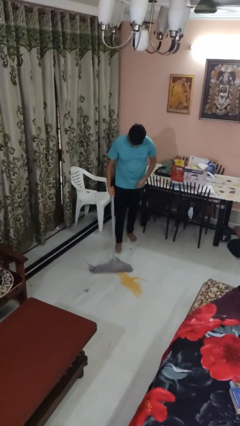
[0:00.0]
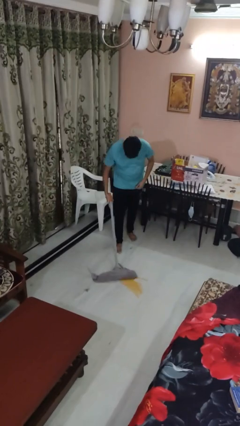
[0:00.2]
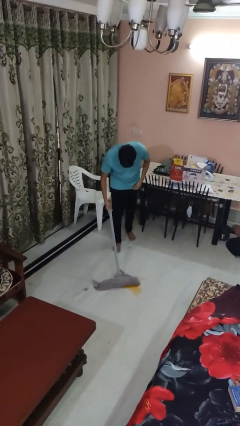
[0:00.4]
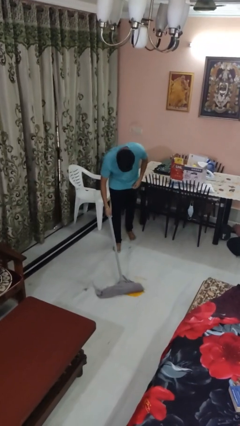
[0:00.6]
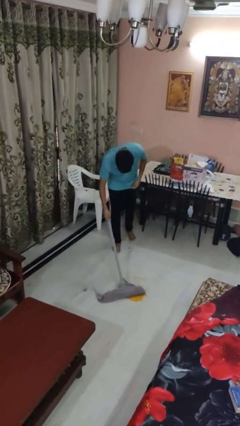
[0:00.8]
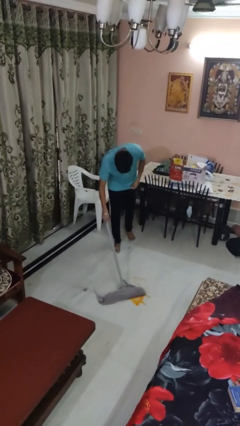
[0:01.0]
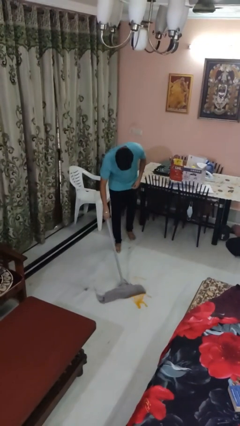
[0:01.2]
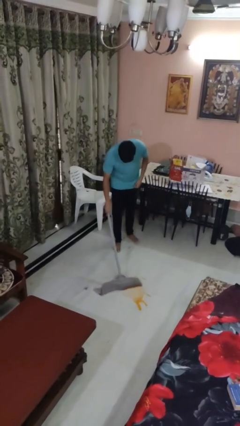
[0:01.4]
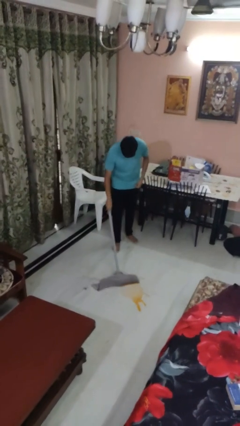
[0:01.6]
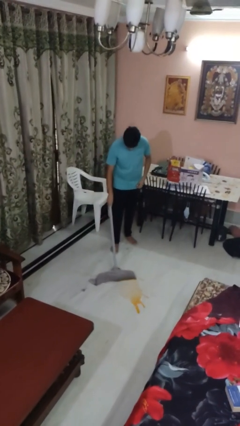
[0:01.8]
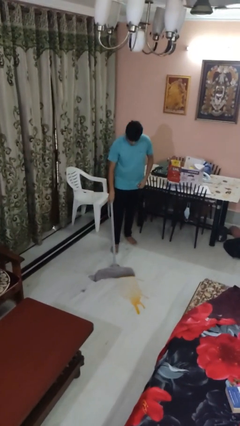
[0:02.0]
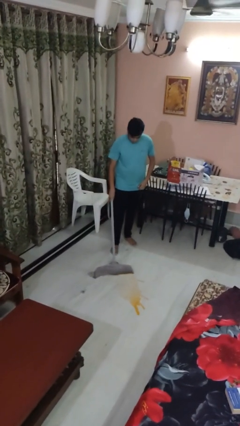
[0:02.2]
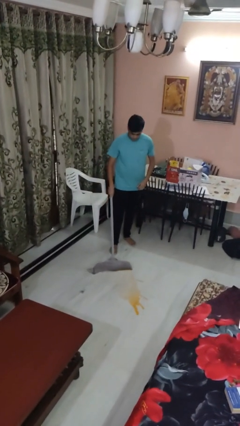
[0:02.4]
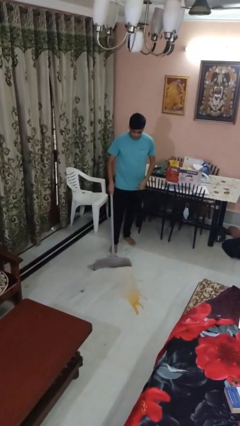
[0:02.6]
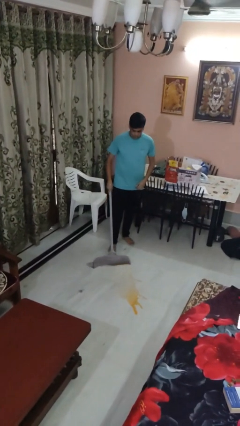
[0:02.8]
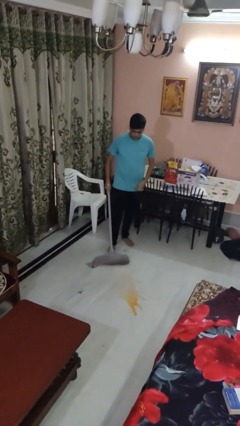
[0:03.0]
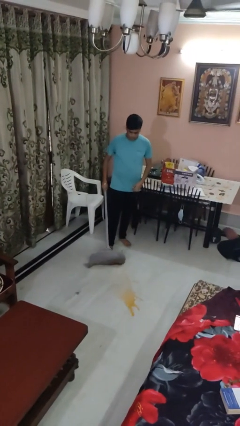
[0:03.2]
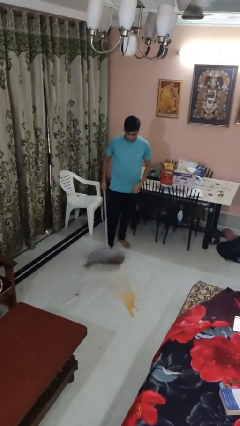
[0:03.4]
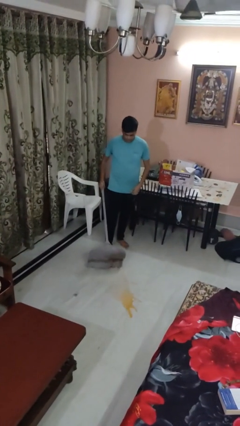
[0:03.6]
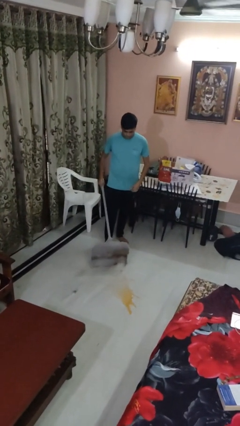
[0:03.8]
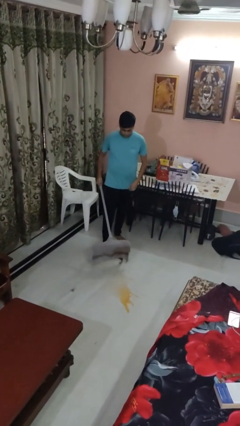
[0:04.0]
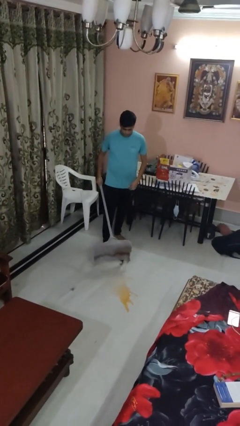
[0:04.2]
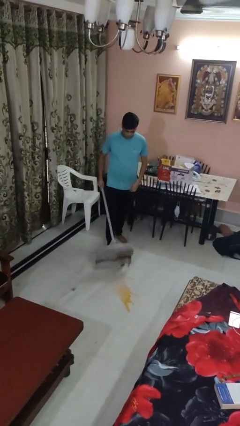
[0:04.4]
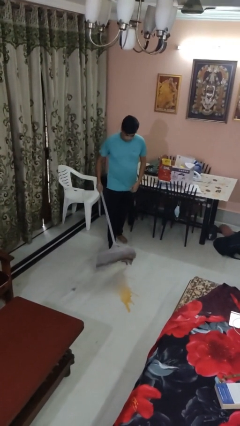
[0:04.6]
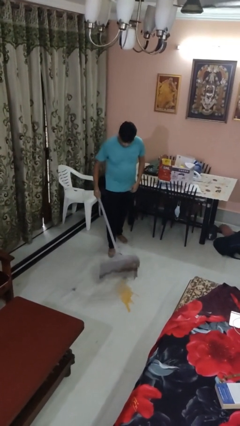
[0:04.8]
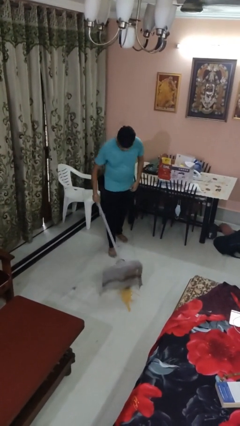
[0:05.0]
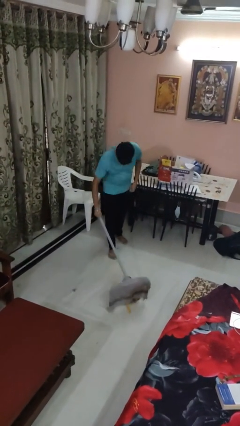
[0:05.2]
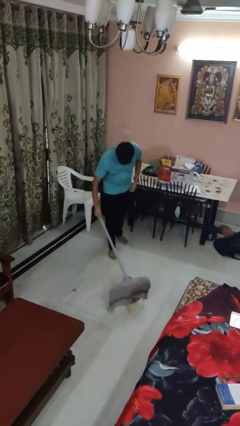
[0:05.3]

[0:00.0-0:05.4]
person mops

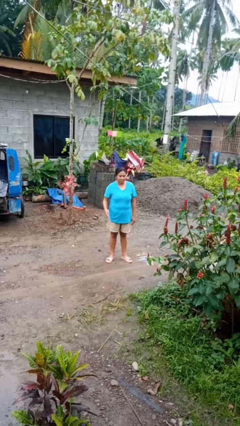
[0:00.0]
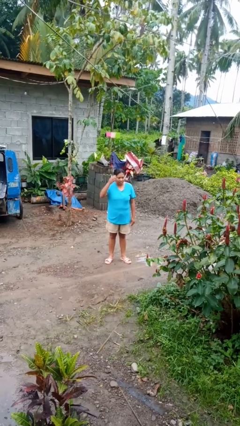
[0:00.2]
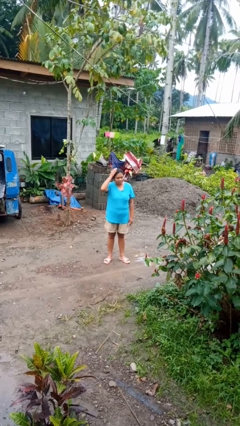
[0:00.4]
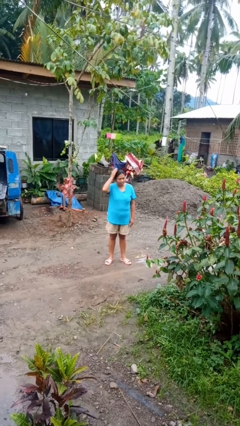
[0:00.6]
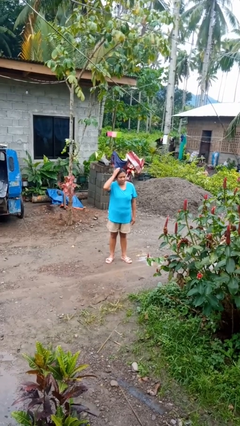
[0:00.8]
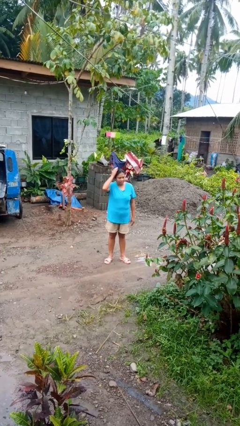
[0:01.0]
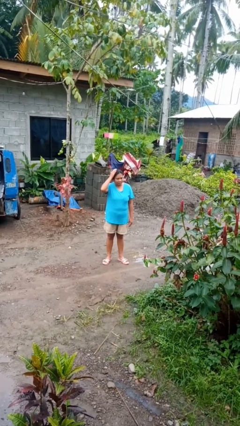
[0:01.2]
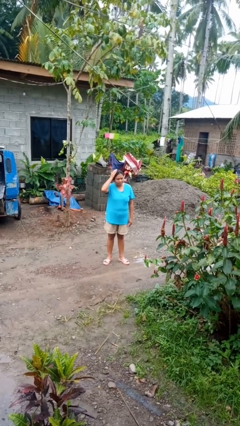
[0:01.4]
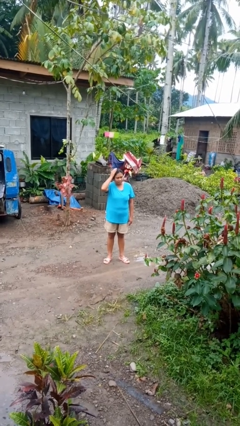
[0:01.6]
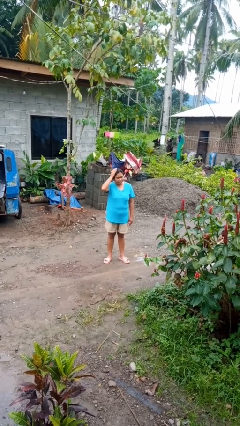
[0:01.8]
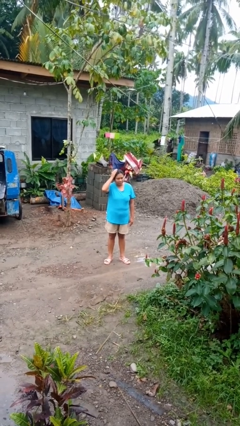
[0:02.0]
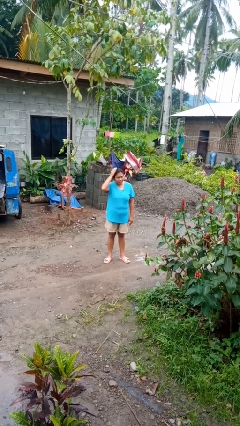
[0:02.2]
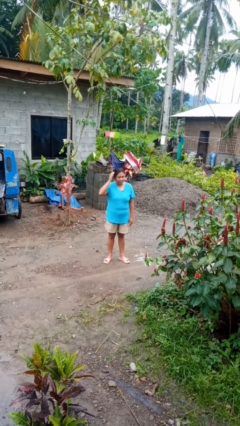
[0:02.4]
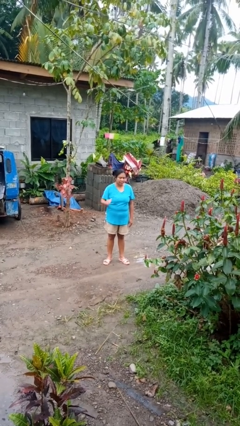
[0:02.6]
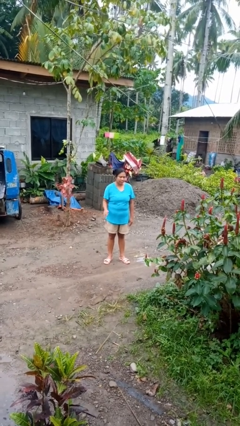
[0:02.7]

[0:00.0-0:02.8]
person pats head

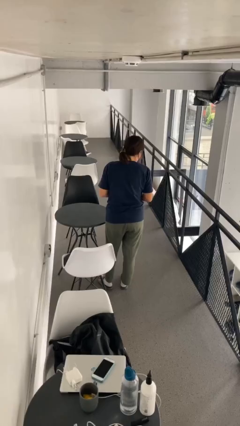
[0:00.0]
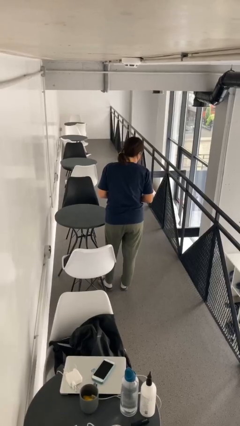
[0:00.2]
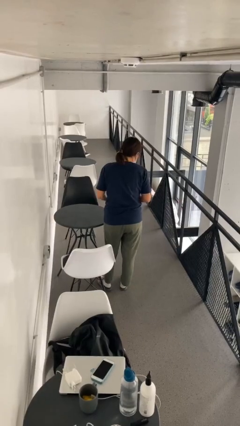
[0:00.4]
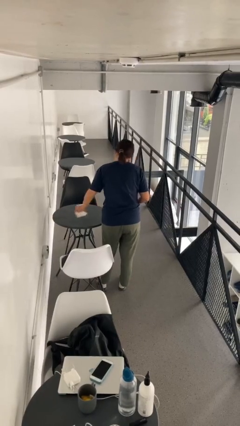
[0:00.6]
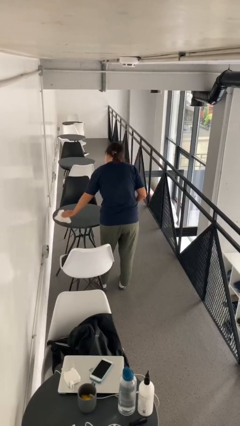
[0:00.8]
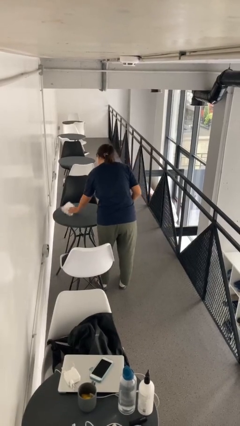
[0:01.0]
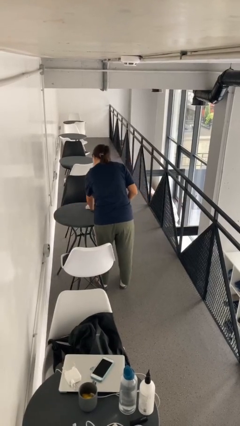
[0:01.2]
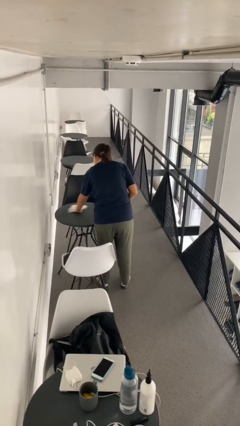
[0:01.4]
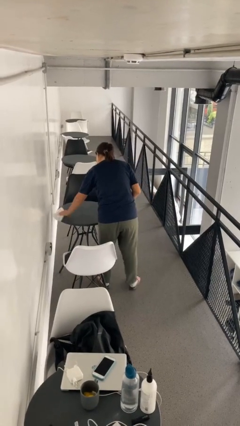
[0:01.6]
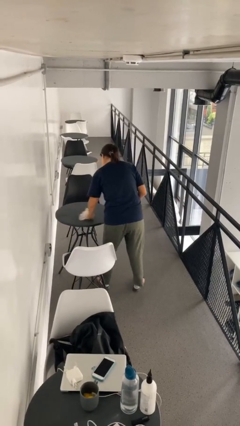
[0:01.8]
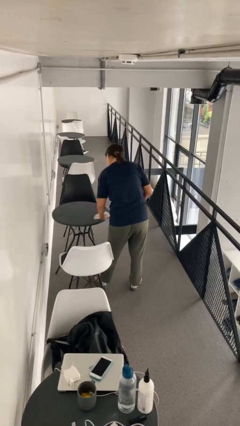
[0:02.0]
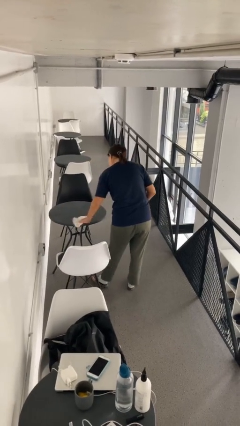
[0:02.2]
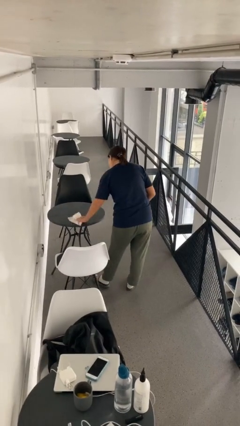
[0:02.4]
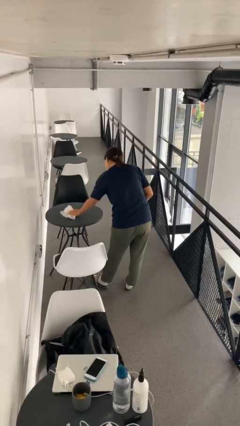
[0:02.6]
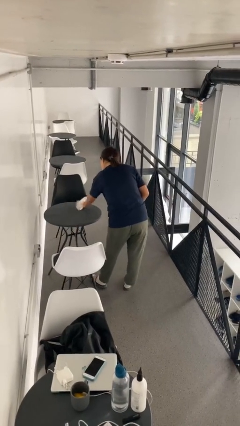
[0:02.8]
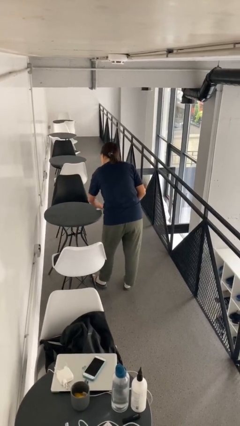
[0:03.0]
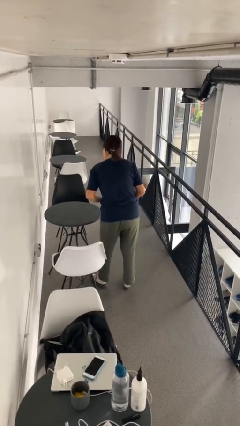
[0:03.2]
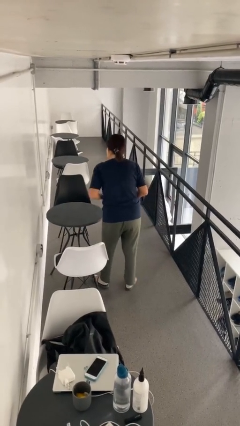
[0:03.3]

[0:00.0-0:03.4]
person cleans table with rag

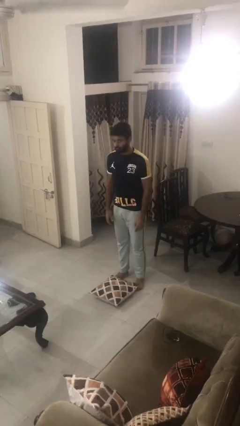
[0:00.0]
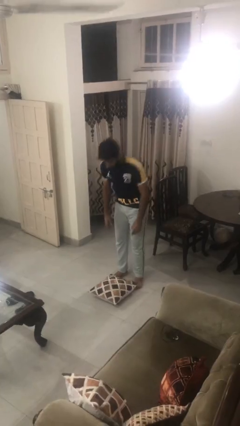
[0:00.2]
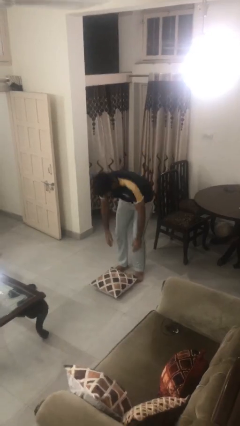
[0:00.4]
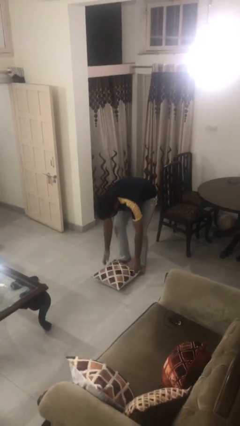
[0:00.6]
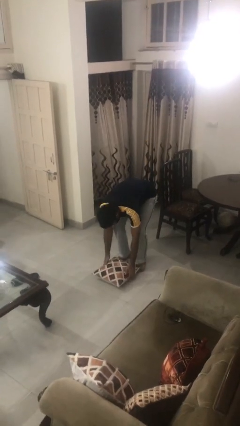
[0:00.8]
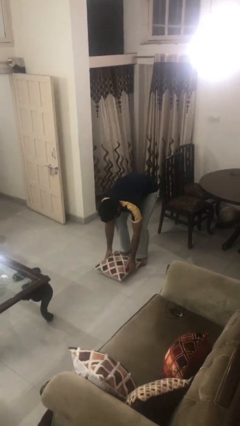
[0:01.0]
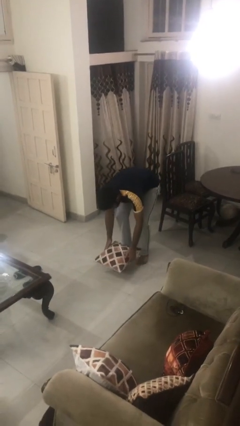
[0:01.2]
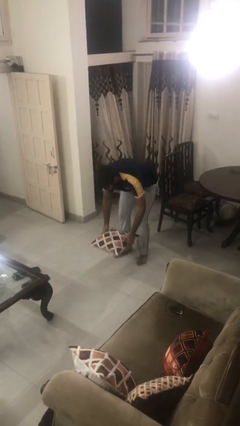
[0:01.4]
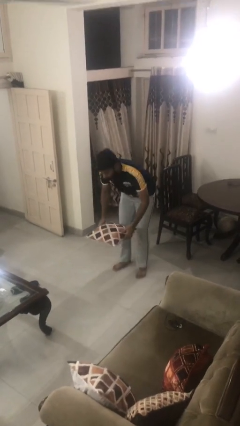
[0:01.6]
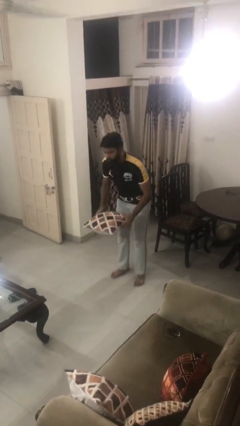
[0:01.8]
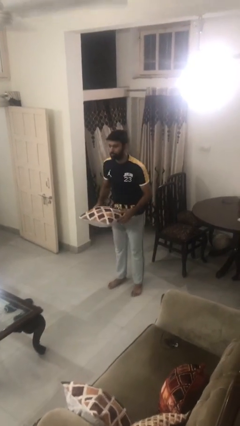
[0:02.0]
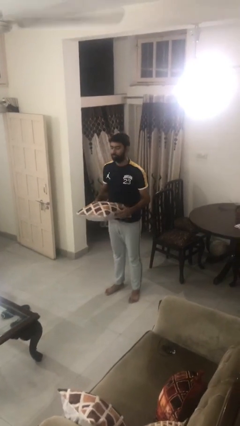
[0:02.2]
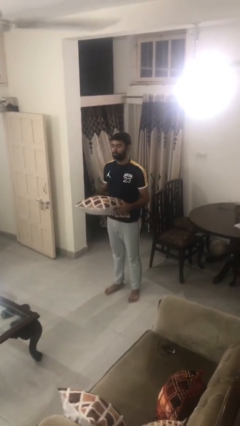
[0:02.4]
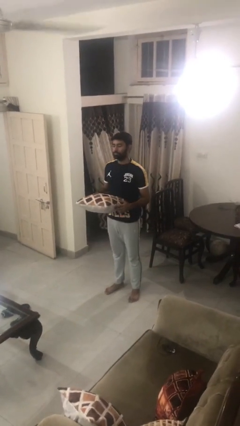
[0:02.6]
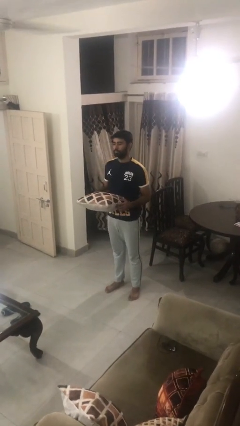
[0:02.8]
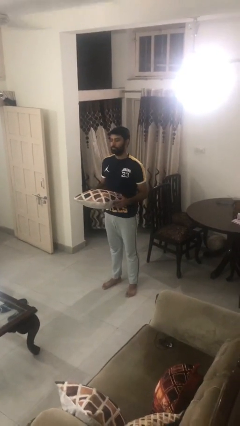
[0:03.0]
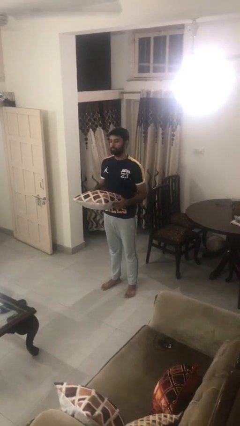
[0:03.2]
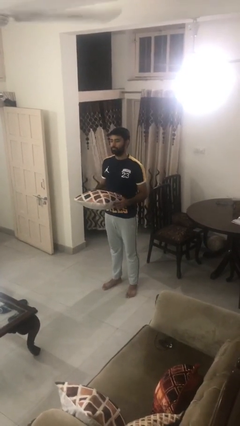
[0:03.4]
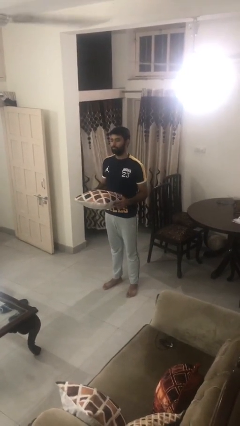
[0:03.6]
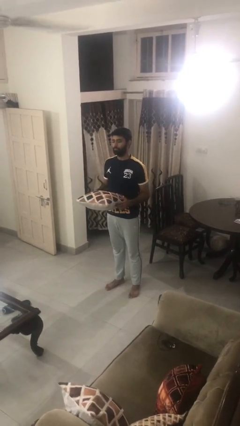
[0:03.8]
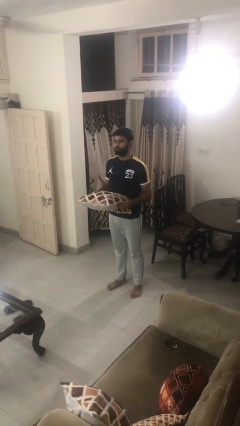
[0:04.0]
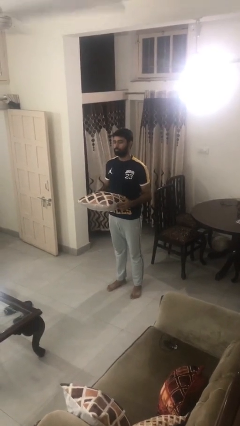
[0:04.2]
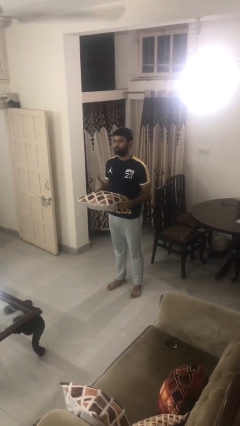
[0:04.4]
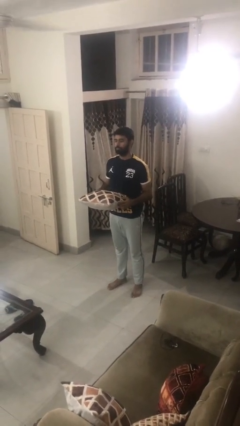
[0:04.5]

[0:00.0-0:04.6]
person picks up object from floor

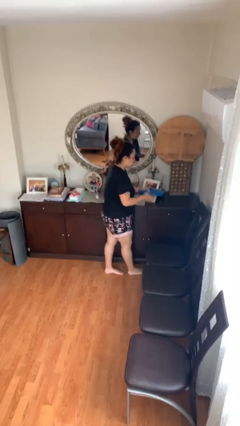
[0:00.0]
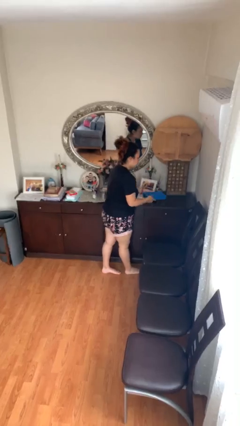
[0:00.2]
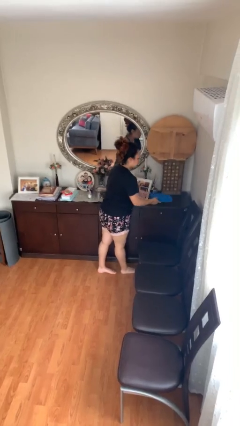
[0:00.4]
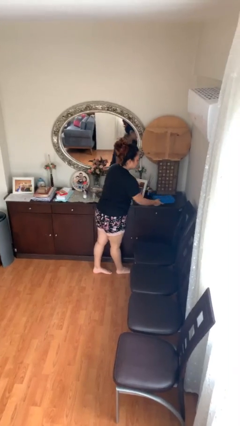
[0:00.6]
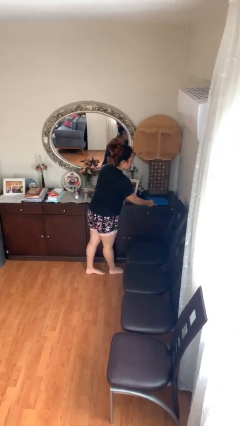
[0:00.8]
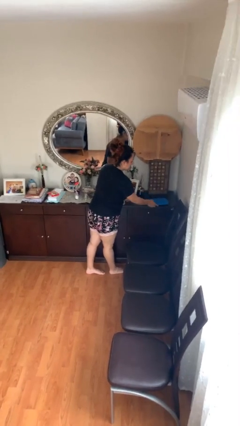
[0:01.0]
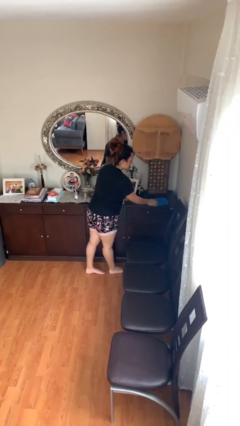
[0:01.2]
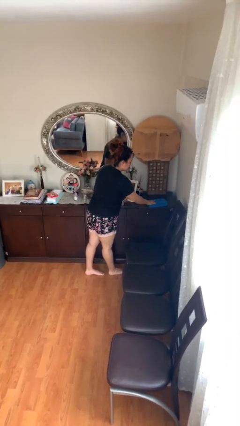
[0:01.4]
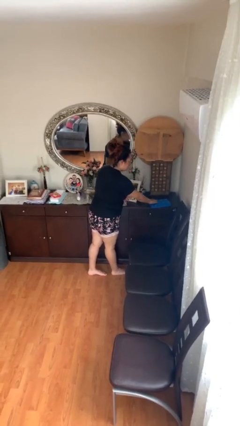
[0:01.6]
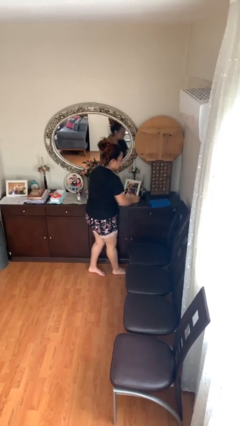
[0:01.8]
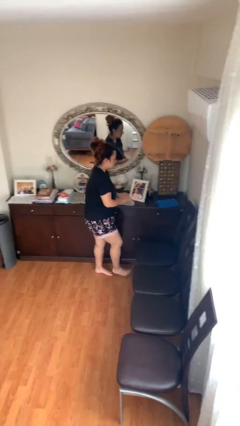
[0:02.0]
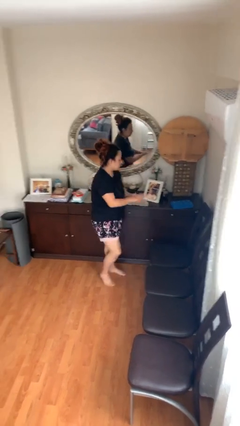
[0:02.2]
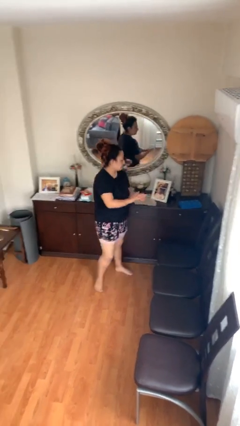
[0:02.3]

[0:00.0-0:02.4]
person puts down object on table
